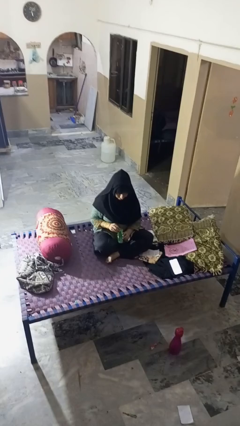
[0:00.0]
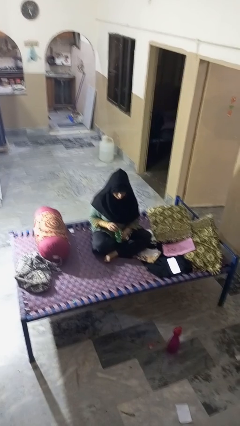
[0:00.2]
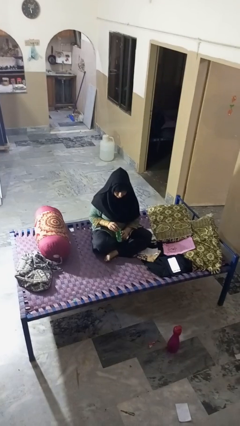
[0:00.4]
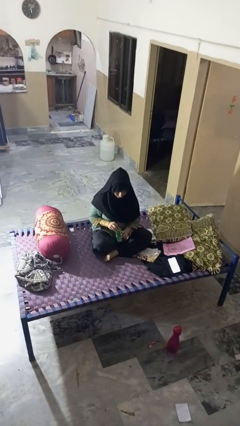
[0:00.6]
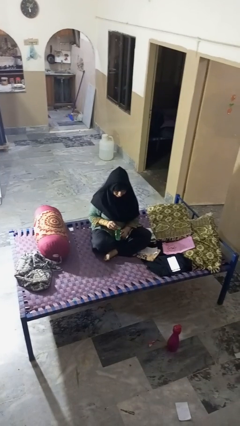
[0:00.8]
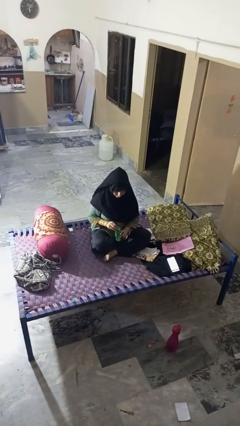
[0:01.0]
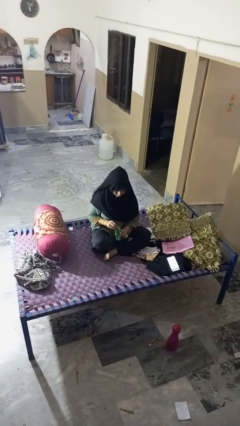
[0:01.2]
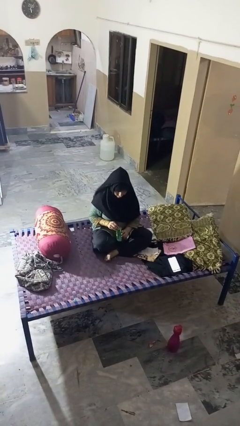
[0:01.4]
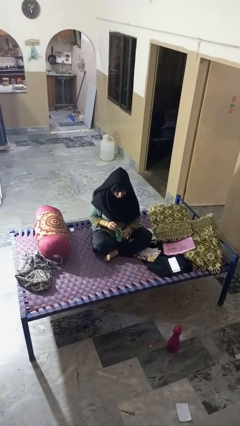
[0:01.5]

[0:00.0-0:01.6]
person opens can with can opener

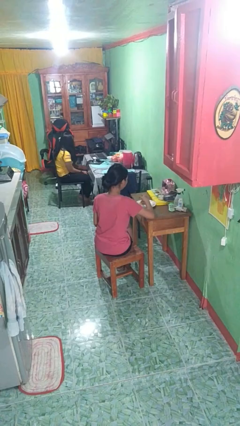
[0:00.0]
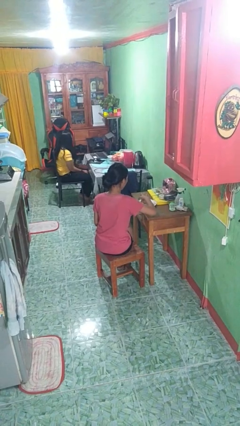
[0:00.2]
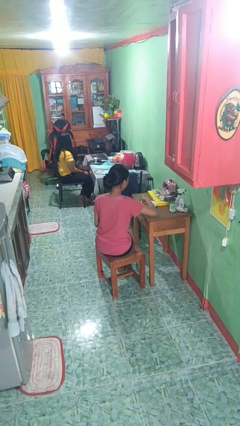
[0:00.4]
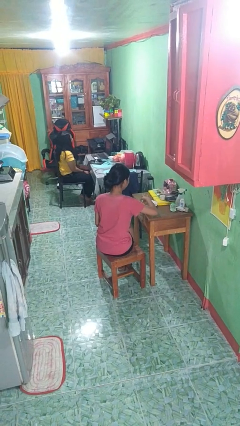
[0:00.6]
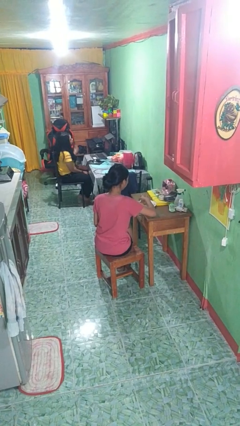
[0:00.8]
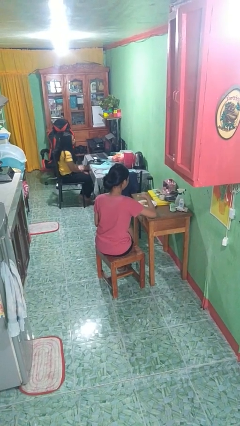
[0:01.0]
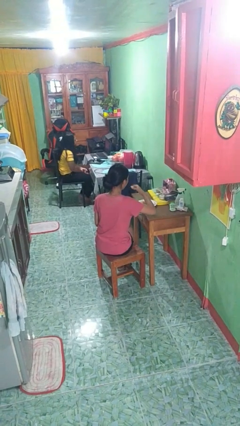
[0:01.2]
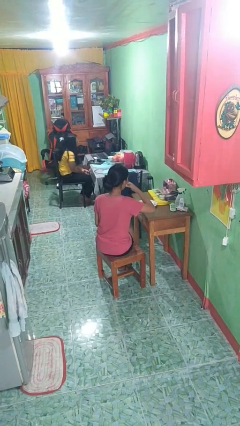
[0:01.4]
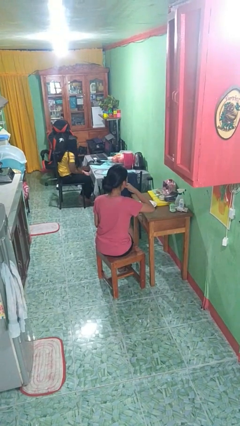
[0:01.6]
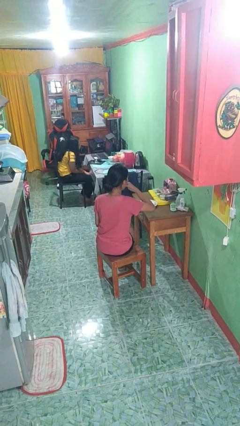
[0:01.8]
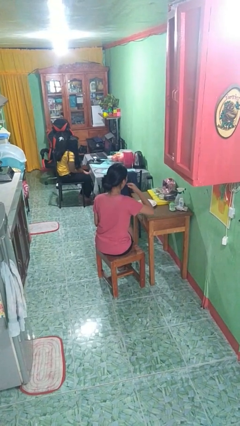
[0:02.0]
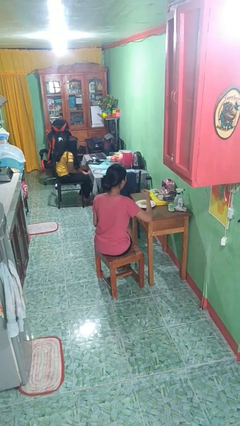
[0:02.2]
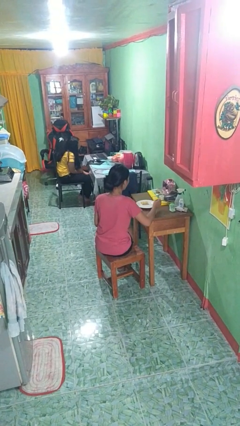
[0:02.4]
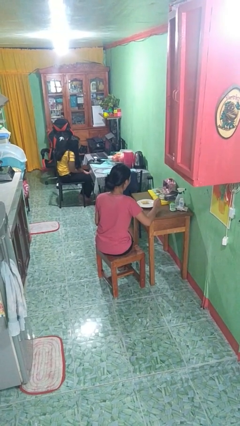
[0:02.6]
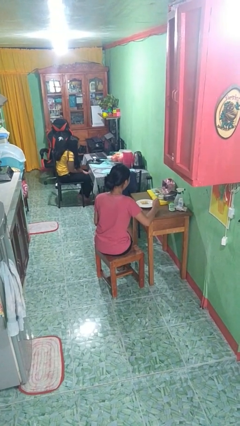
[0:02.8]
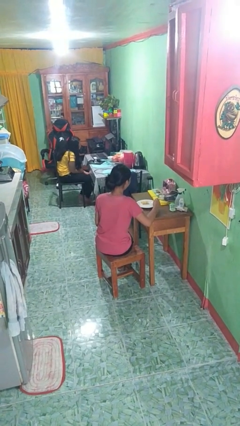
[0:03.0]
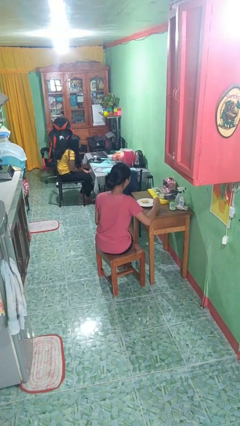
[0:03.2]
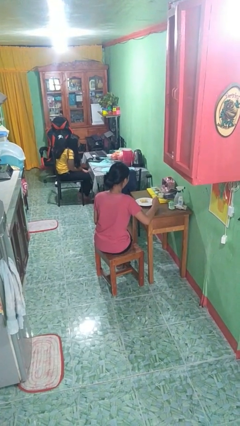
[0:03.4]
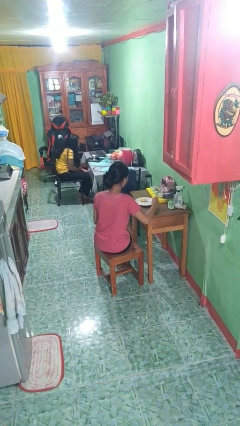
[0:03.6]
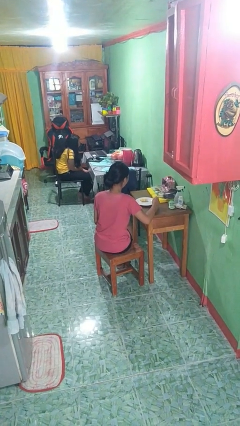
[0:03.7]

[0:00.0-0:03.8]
person eats with hands

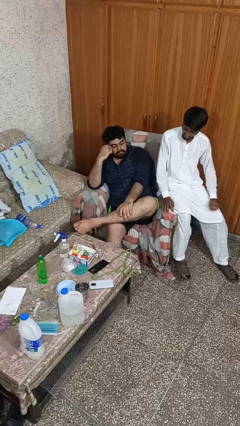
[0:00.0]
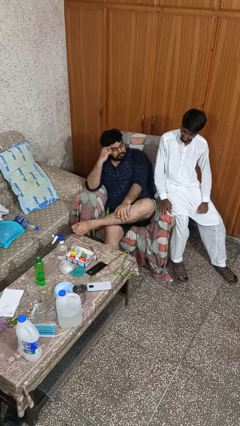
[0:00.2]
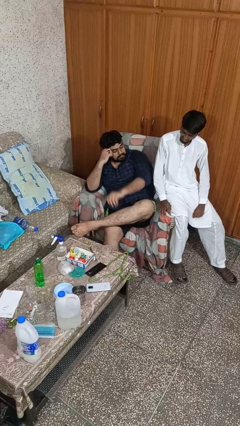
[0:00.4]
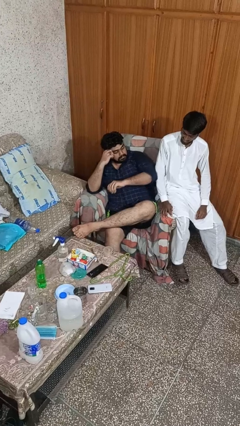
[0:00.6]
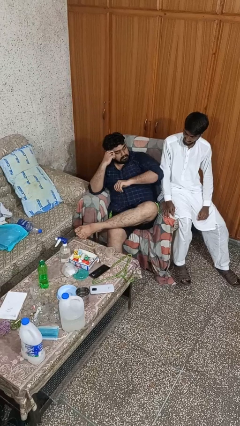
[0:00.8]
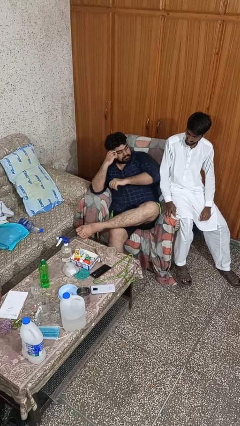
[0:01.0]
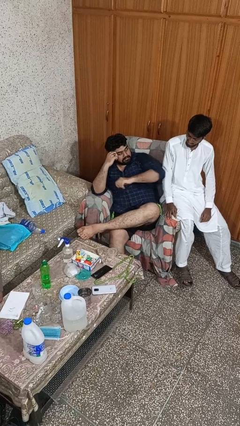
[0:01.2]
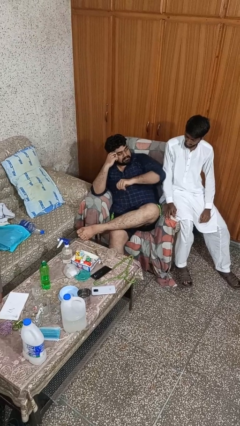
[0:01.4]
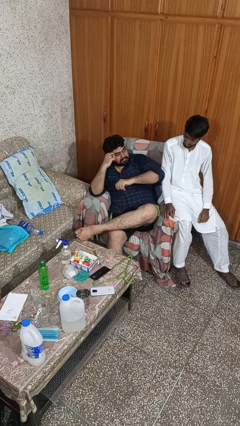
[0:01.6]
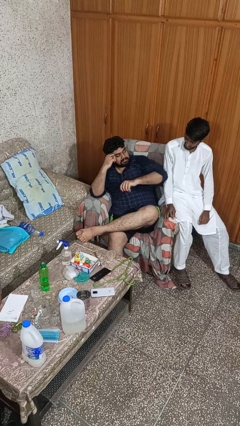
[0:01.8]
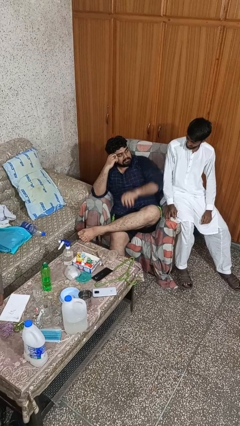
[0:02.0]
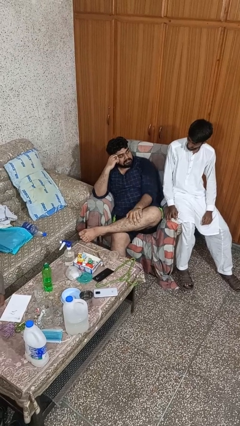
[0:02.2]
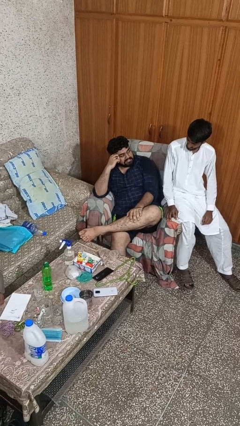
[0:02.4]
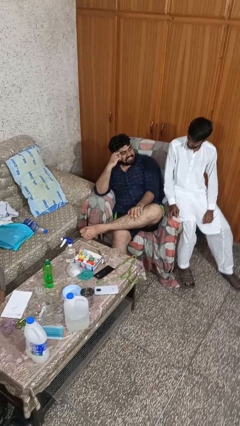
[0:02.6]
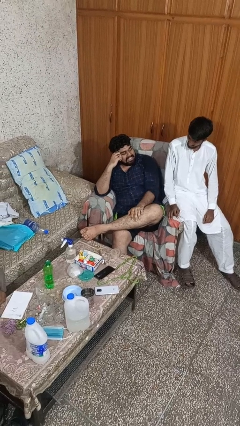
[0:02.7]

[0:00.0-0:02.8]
person nudges person with elbow

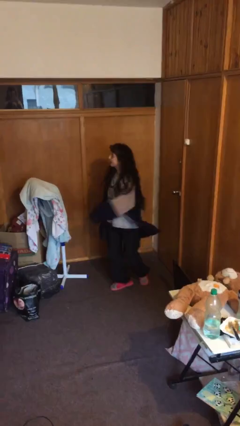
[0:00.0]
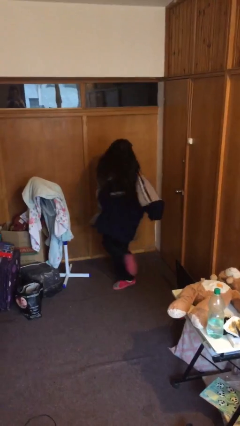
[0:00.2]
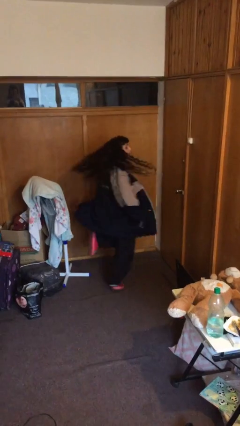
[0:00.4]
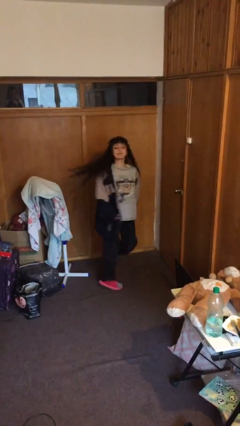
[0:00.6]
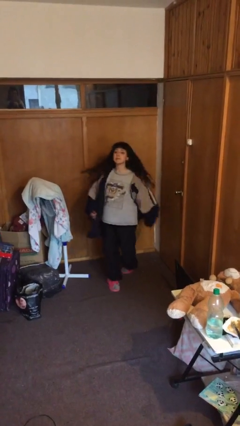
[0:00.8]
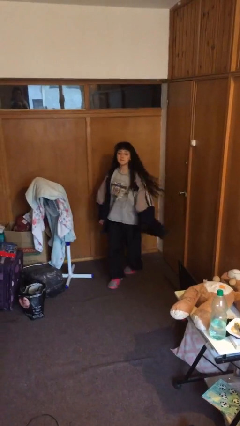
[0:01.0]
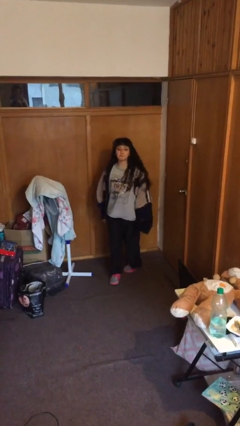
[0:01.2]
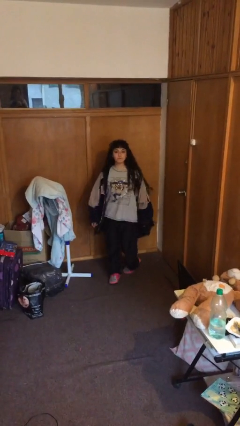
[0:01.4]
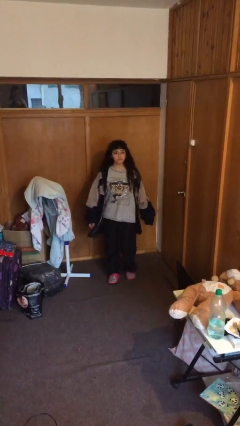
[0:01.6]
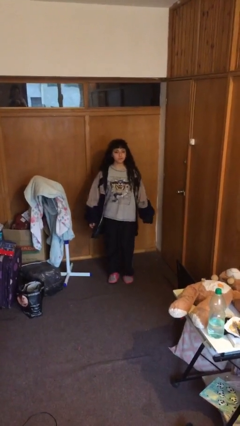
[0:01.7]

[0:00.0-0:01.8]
person twirls

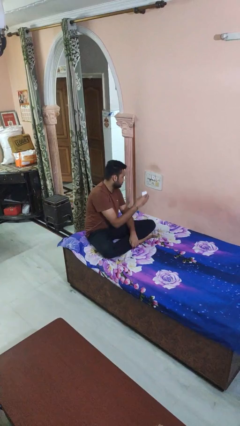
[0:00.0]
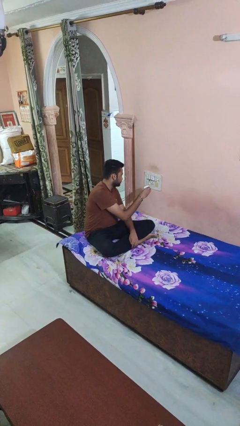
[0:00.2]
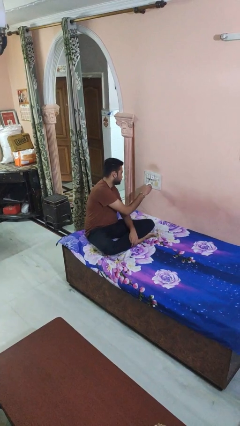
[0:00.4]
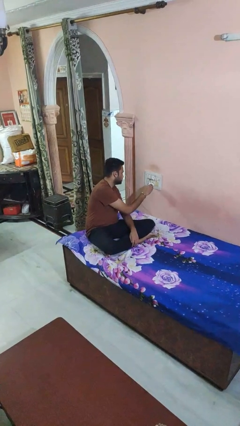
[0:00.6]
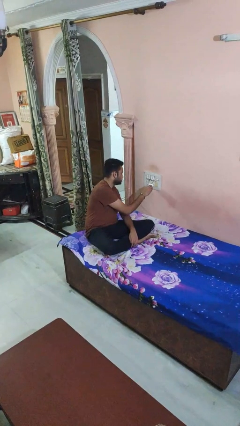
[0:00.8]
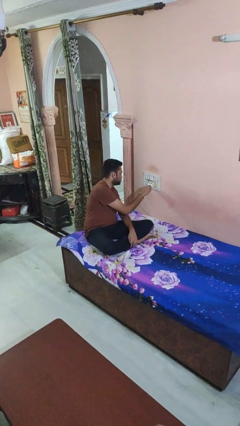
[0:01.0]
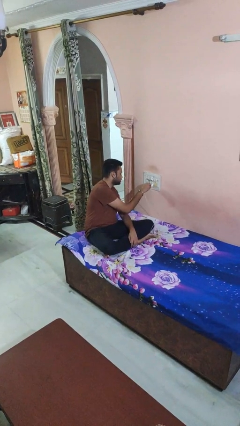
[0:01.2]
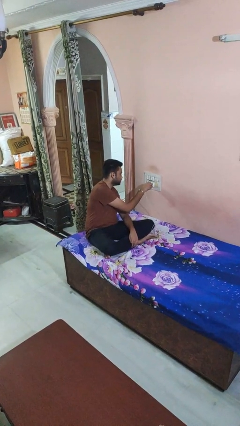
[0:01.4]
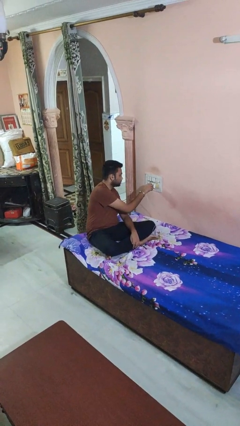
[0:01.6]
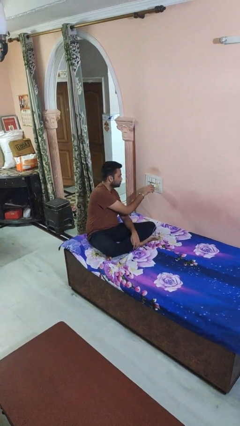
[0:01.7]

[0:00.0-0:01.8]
person plugs into electrical socket

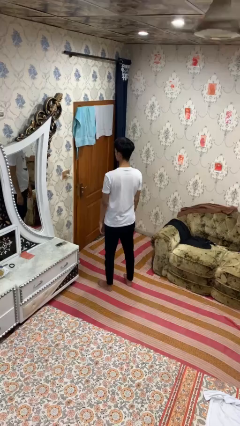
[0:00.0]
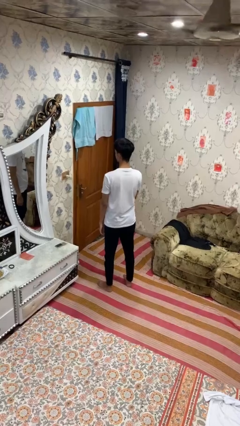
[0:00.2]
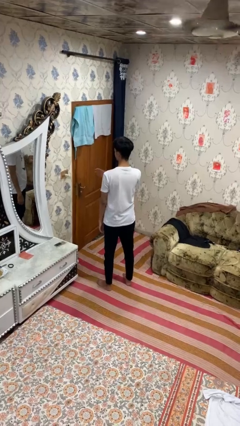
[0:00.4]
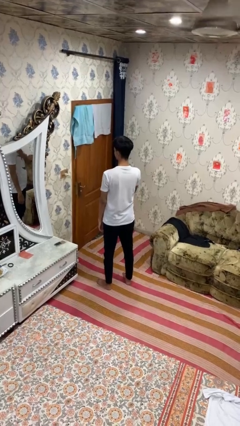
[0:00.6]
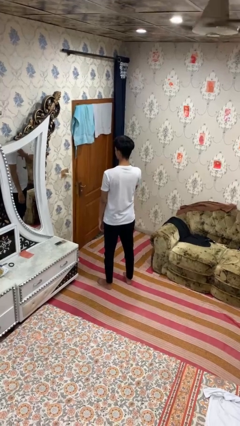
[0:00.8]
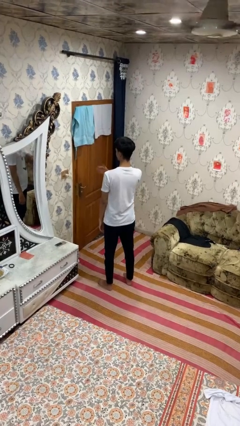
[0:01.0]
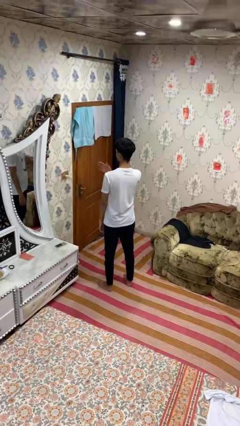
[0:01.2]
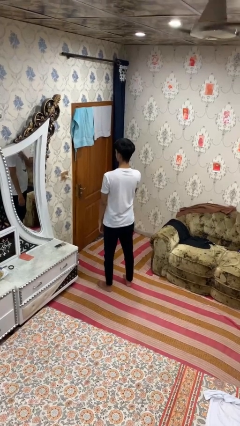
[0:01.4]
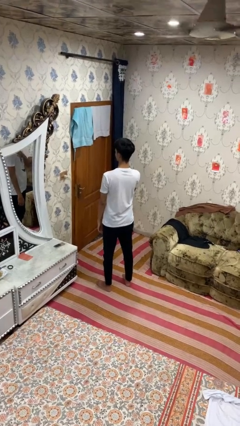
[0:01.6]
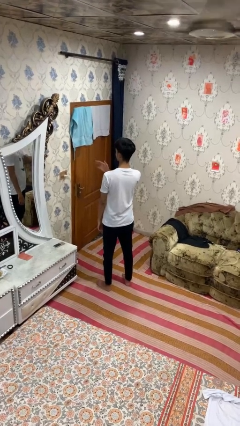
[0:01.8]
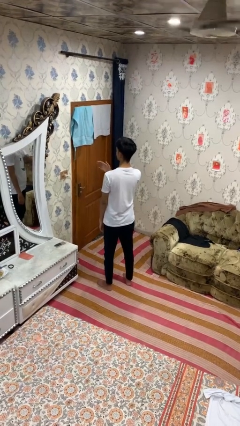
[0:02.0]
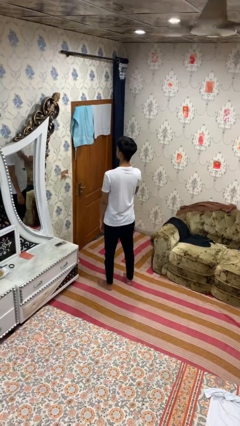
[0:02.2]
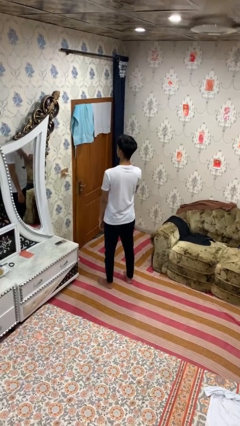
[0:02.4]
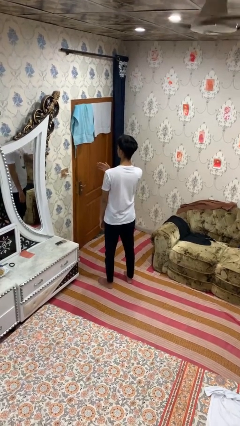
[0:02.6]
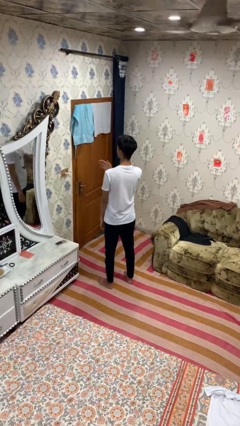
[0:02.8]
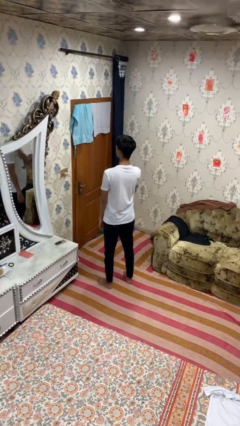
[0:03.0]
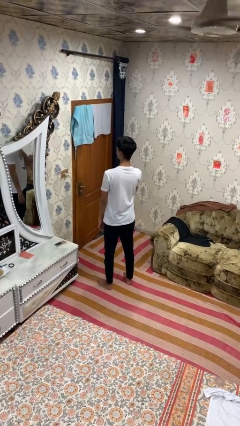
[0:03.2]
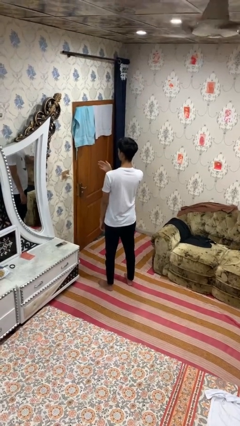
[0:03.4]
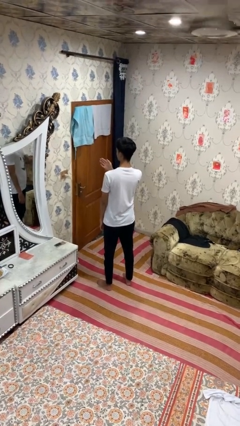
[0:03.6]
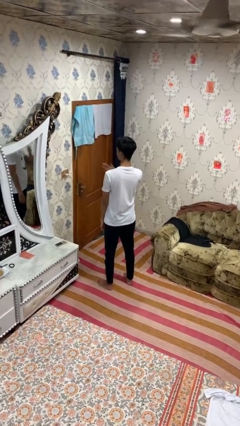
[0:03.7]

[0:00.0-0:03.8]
person drums on chest

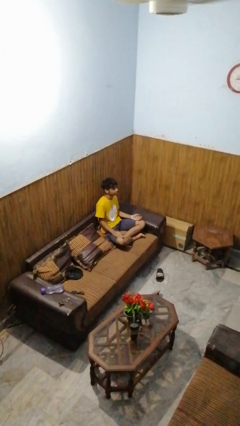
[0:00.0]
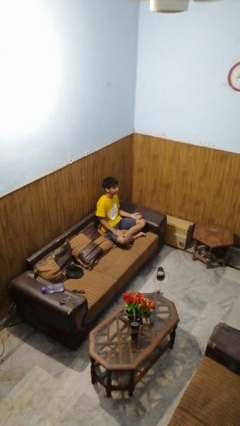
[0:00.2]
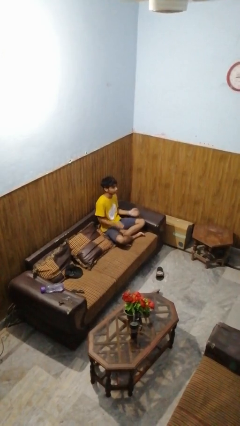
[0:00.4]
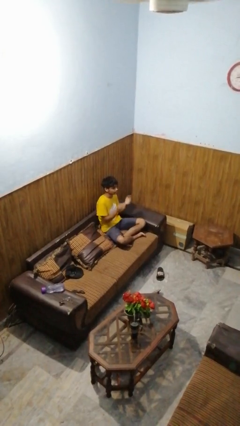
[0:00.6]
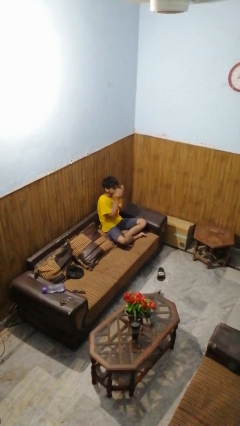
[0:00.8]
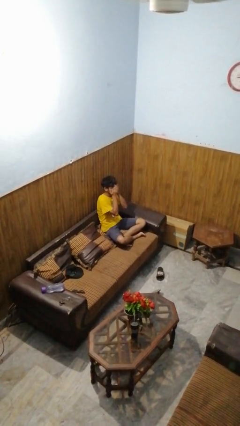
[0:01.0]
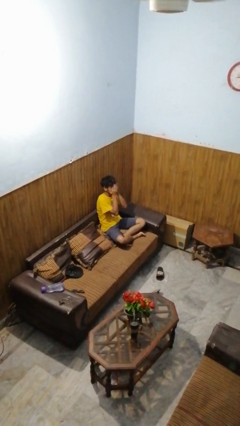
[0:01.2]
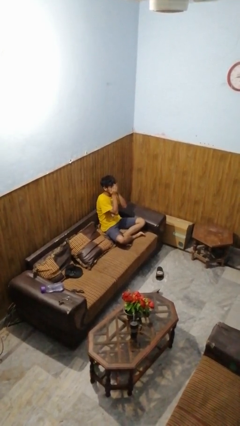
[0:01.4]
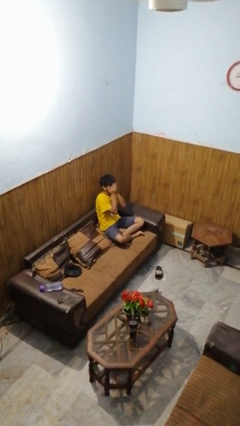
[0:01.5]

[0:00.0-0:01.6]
person covers face with hands
